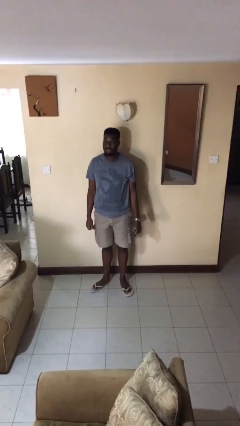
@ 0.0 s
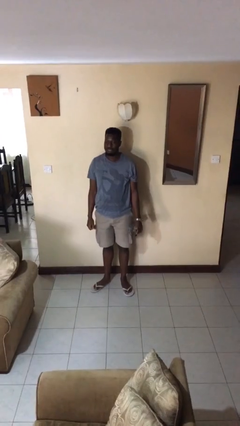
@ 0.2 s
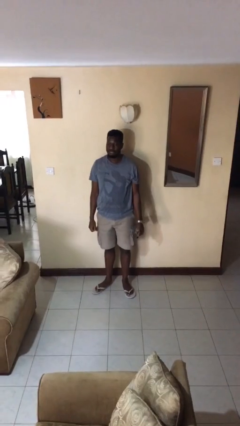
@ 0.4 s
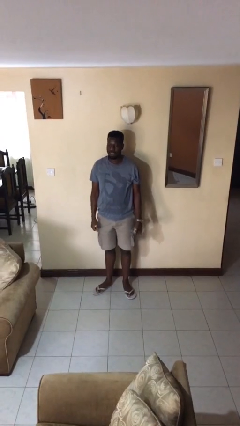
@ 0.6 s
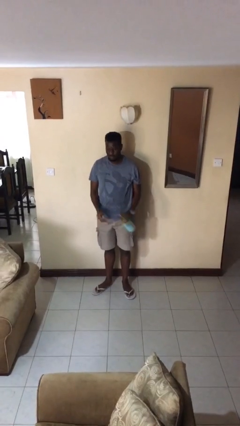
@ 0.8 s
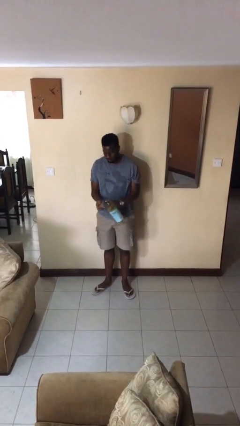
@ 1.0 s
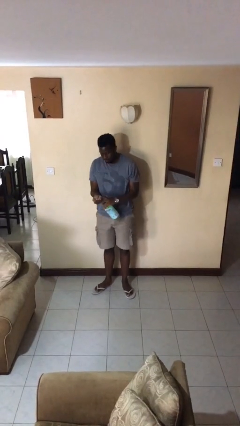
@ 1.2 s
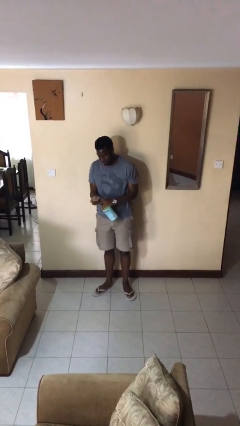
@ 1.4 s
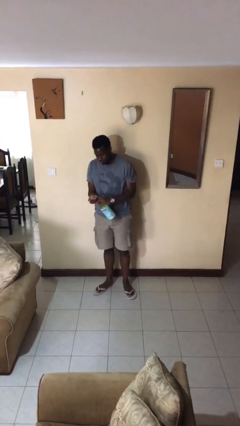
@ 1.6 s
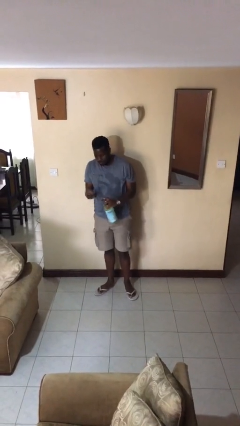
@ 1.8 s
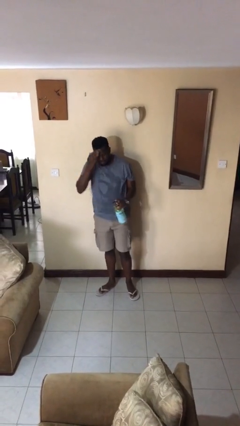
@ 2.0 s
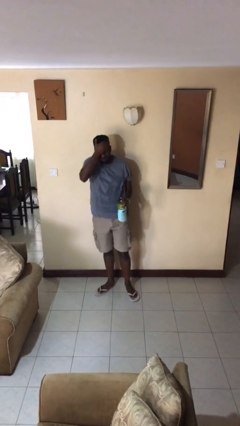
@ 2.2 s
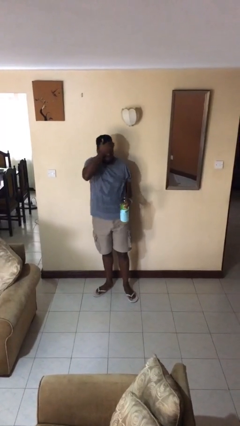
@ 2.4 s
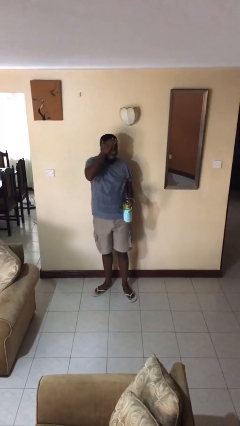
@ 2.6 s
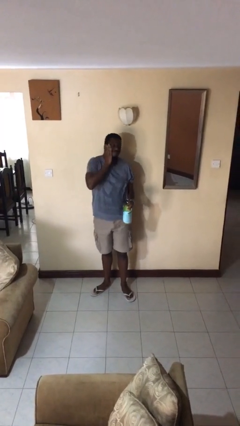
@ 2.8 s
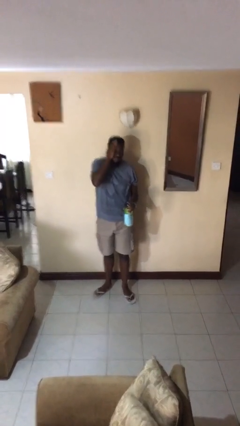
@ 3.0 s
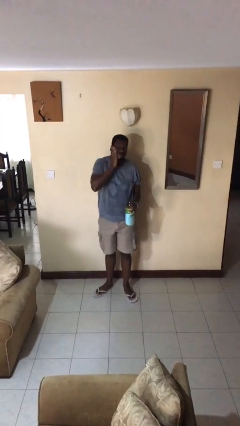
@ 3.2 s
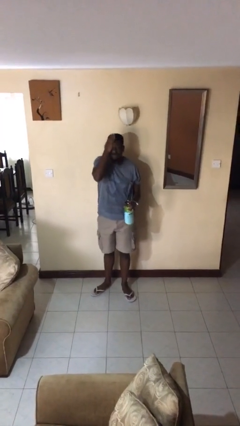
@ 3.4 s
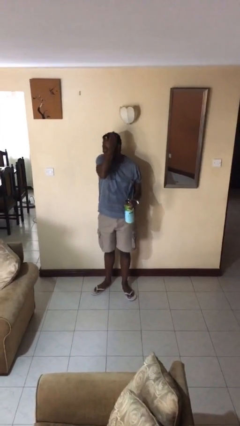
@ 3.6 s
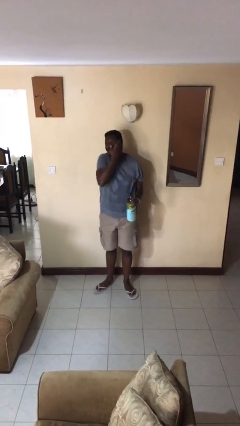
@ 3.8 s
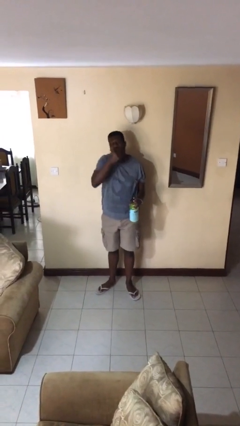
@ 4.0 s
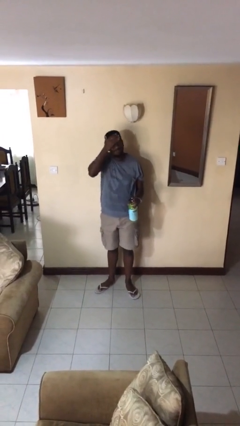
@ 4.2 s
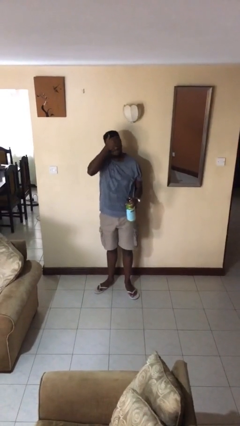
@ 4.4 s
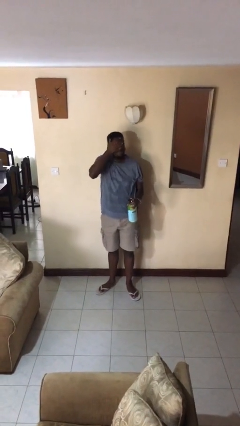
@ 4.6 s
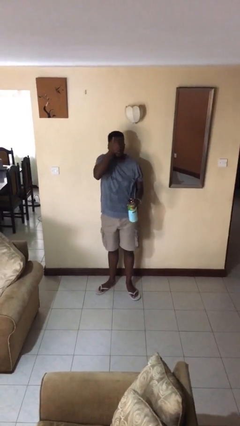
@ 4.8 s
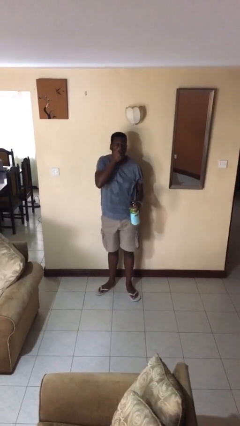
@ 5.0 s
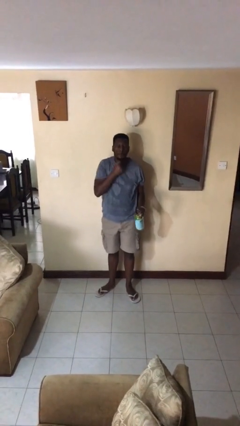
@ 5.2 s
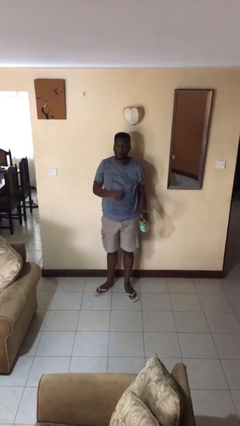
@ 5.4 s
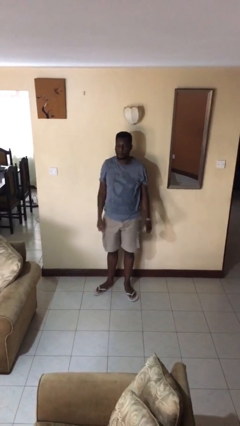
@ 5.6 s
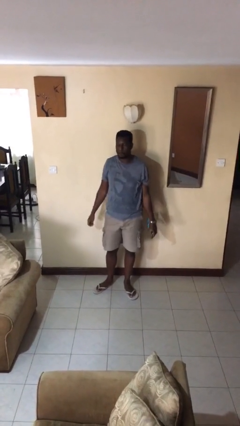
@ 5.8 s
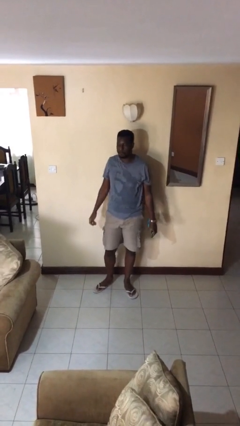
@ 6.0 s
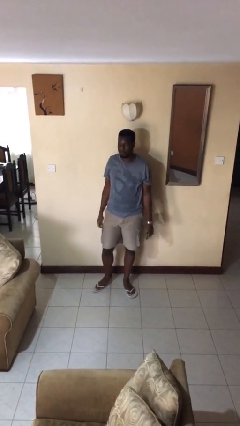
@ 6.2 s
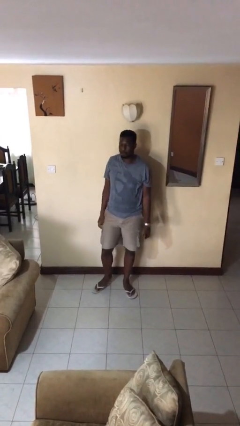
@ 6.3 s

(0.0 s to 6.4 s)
person applies sunscreen

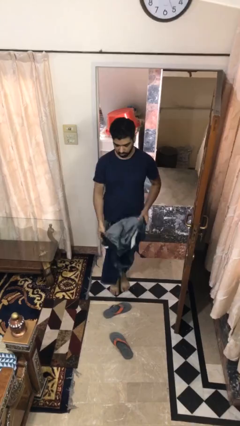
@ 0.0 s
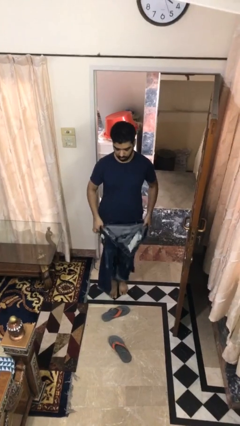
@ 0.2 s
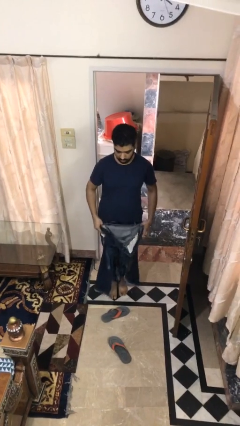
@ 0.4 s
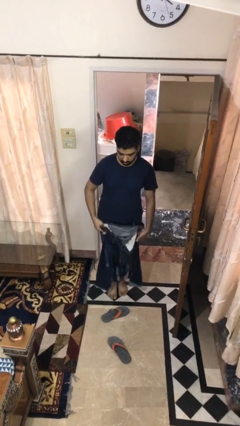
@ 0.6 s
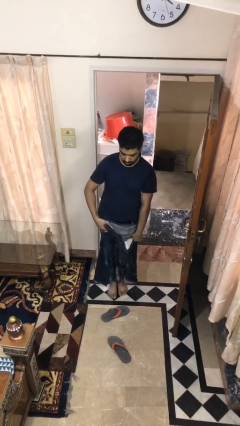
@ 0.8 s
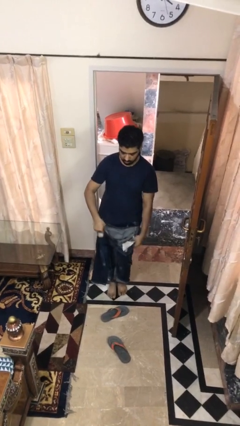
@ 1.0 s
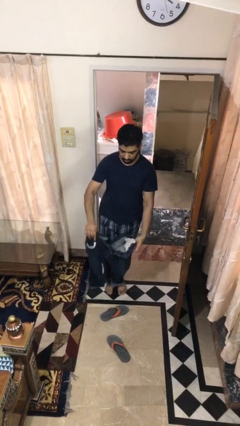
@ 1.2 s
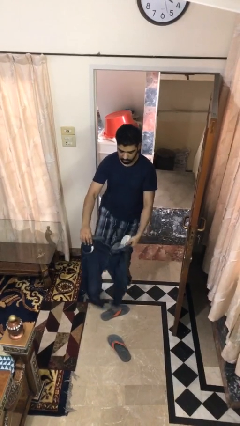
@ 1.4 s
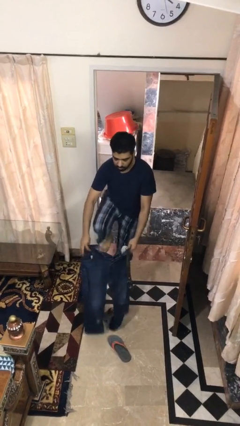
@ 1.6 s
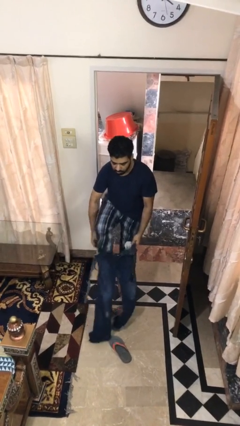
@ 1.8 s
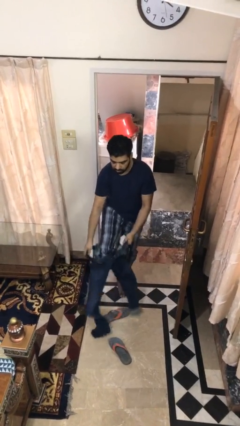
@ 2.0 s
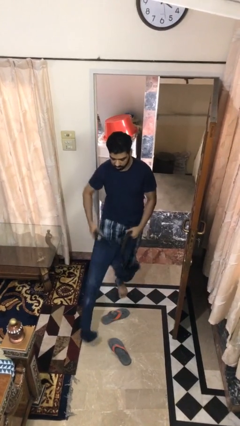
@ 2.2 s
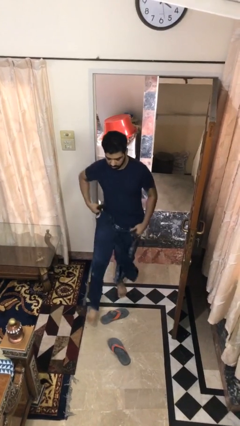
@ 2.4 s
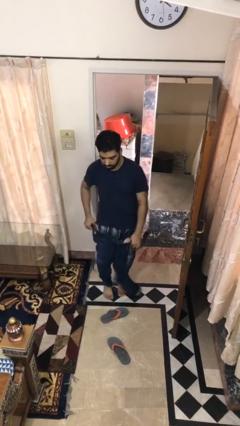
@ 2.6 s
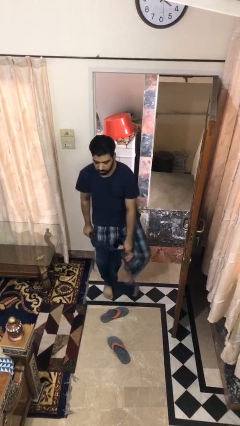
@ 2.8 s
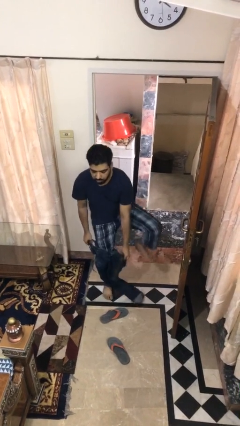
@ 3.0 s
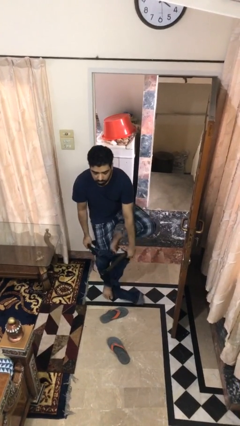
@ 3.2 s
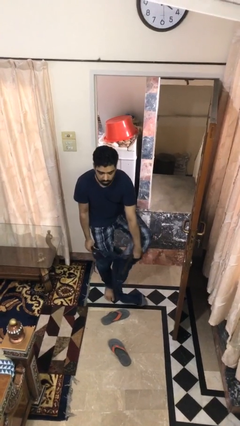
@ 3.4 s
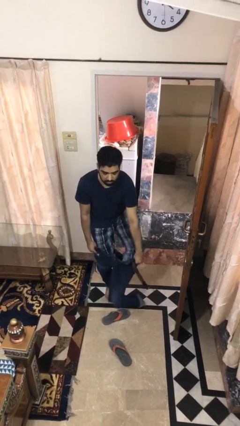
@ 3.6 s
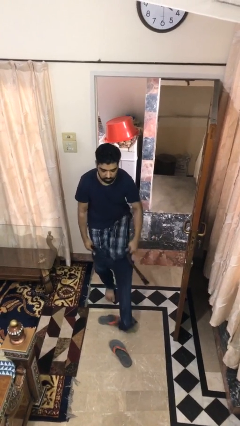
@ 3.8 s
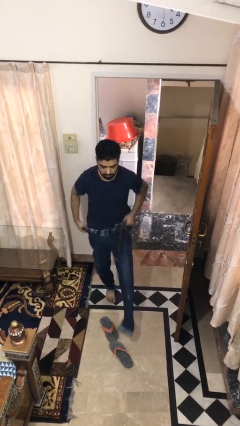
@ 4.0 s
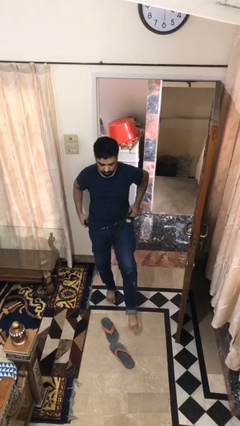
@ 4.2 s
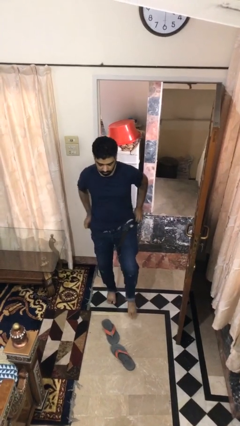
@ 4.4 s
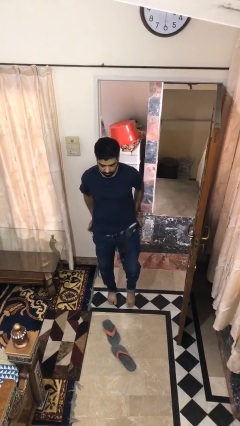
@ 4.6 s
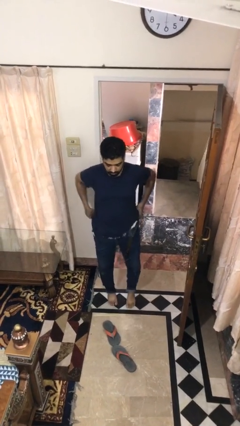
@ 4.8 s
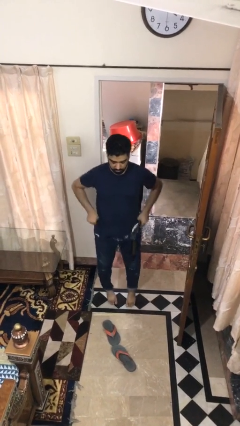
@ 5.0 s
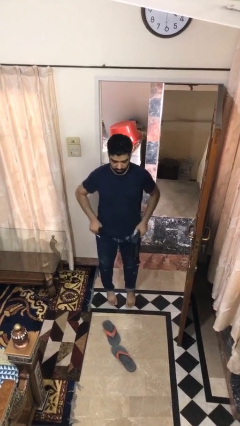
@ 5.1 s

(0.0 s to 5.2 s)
person puts on pants

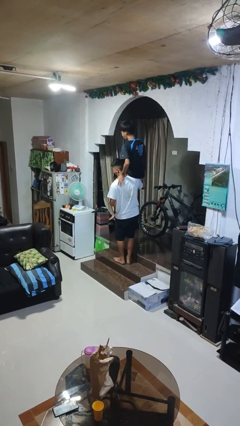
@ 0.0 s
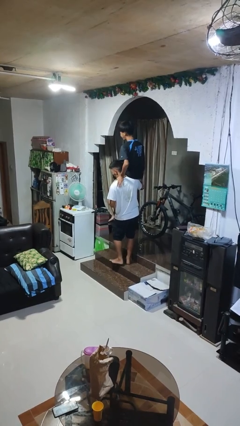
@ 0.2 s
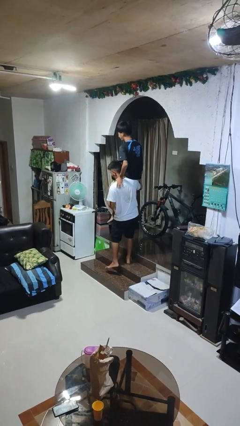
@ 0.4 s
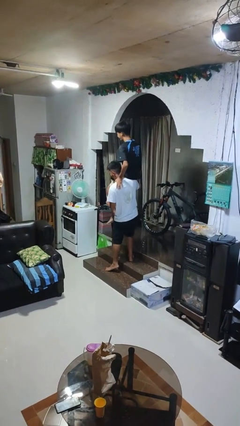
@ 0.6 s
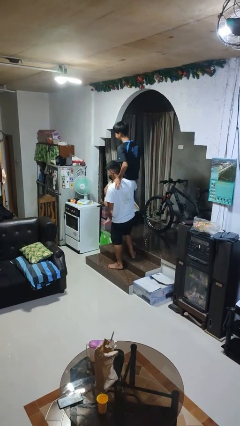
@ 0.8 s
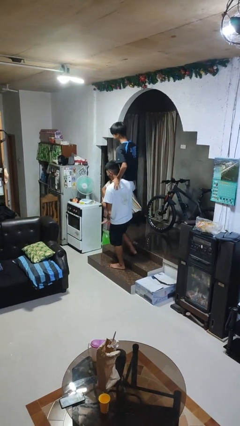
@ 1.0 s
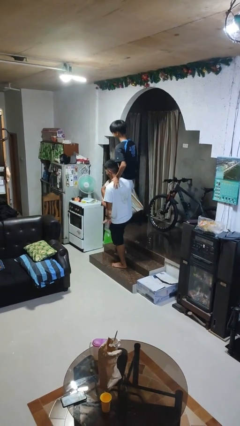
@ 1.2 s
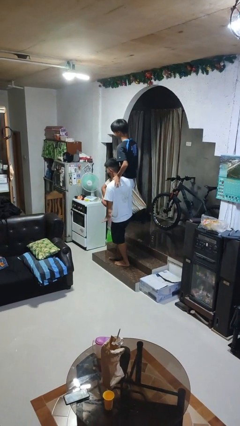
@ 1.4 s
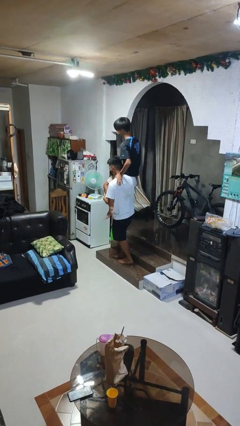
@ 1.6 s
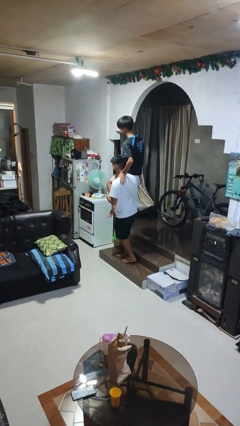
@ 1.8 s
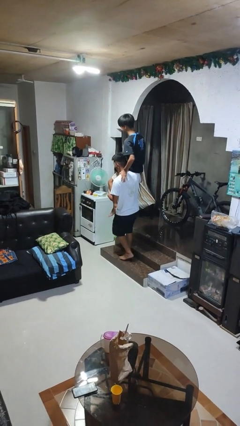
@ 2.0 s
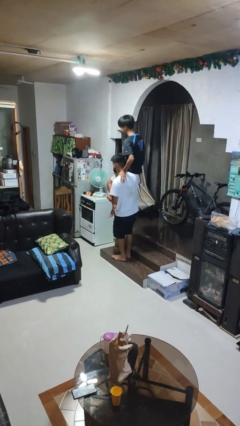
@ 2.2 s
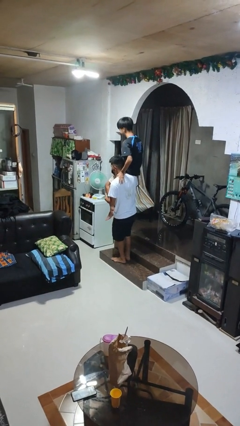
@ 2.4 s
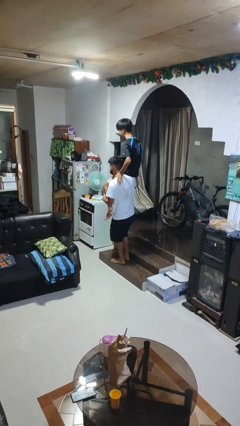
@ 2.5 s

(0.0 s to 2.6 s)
person carries person on shoulders

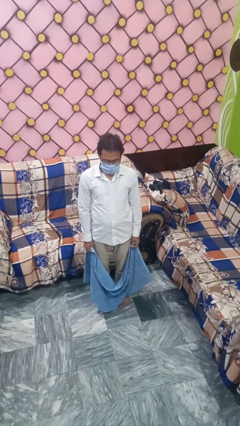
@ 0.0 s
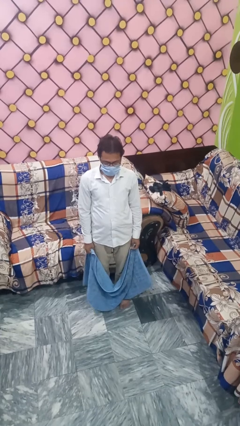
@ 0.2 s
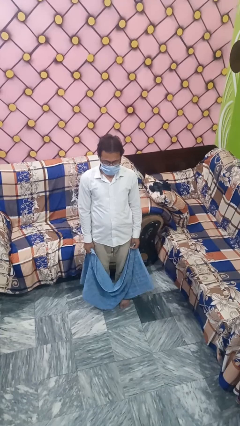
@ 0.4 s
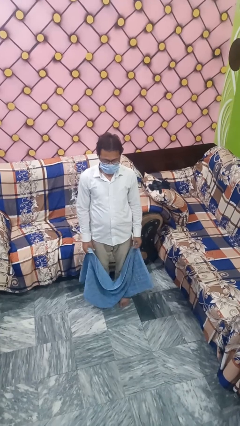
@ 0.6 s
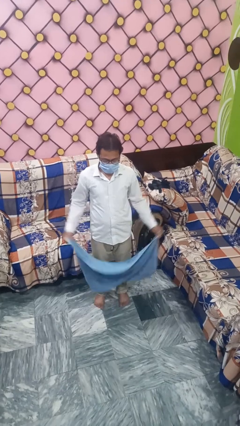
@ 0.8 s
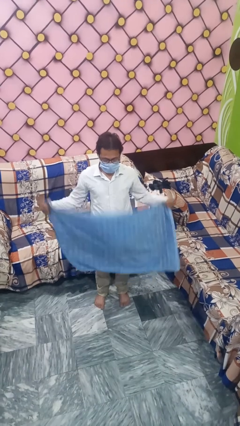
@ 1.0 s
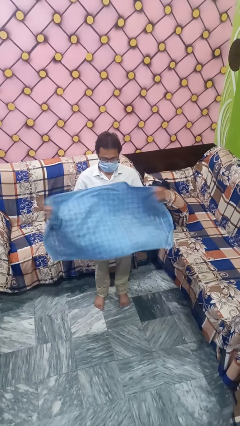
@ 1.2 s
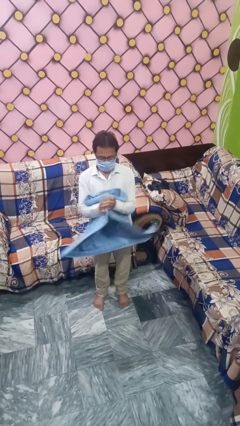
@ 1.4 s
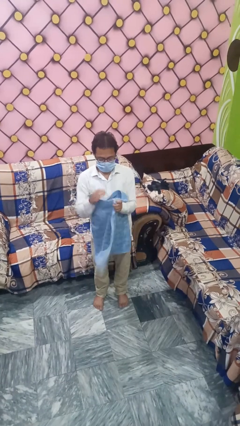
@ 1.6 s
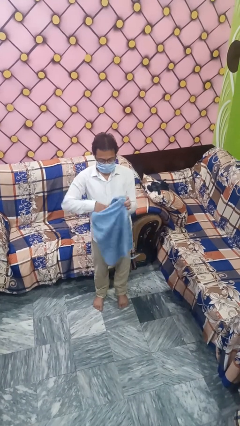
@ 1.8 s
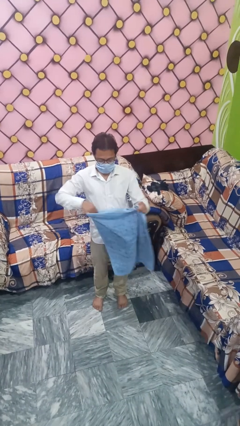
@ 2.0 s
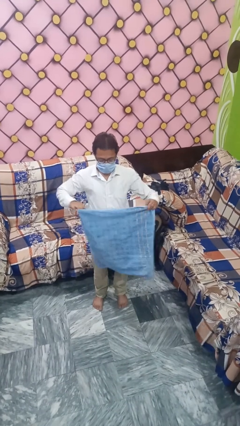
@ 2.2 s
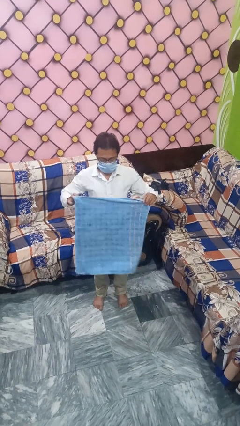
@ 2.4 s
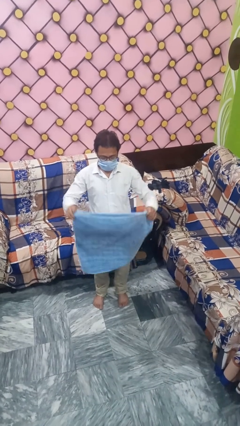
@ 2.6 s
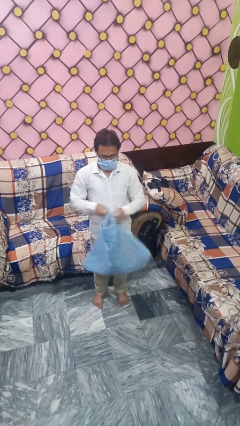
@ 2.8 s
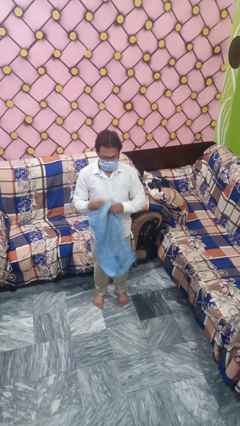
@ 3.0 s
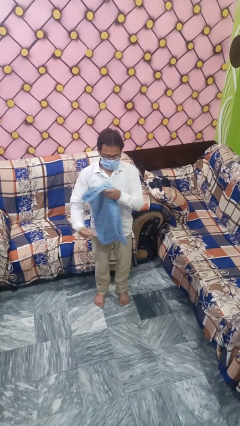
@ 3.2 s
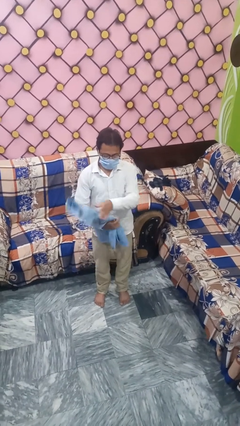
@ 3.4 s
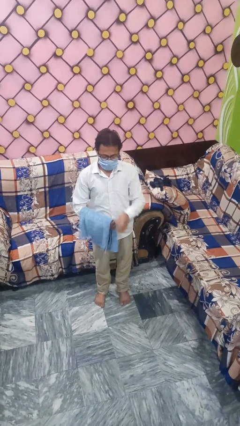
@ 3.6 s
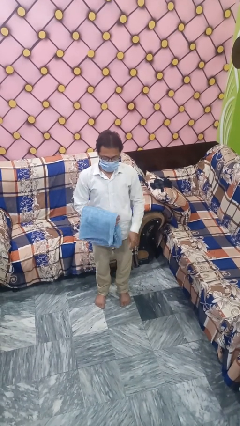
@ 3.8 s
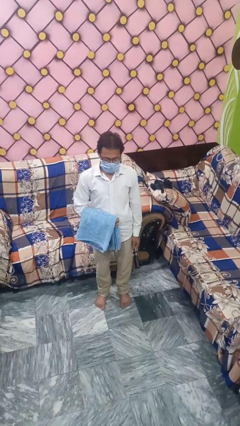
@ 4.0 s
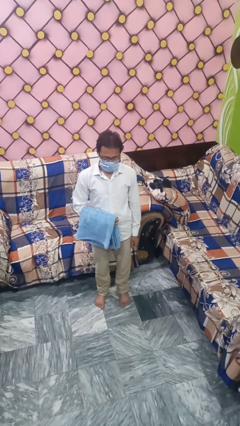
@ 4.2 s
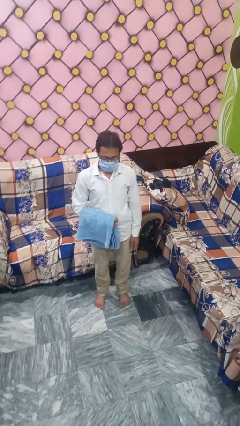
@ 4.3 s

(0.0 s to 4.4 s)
person folds towel
